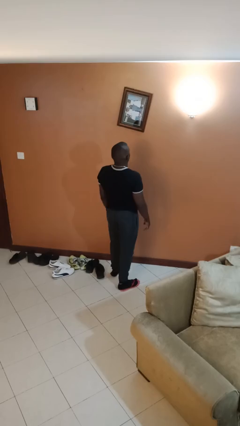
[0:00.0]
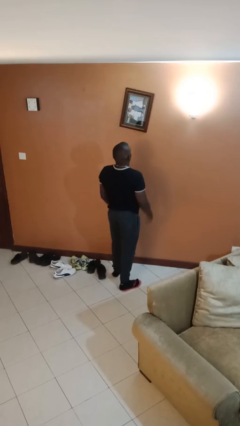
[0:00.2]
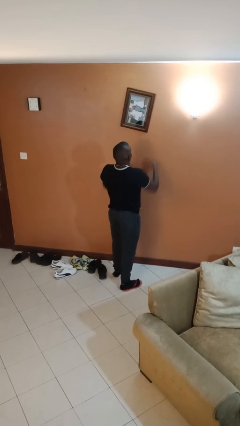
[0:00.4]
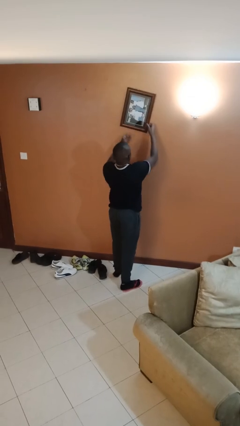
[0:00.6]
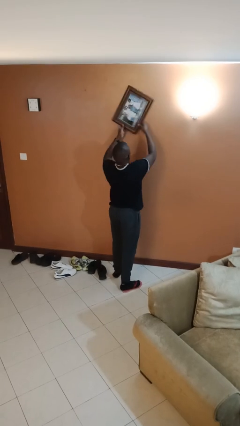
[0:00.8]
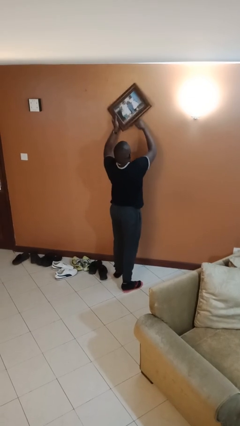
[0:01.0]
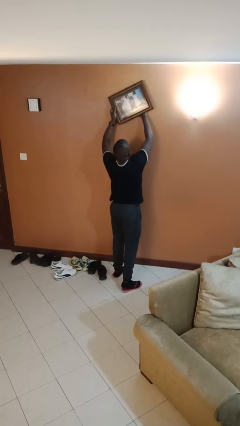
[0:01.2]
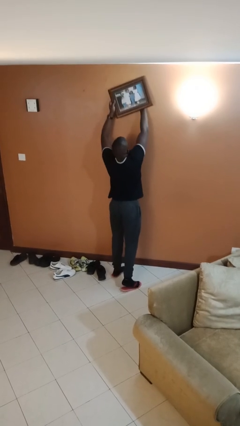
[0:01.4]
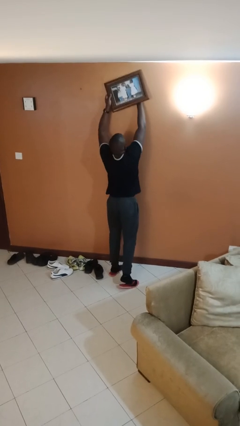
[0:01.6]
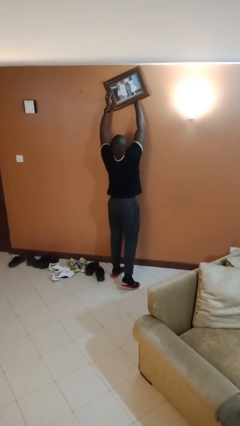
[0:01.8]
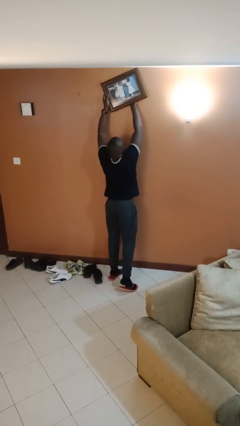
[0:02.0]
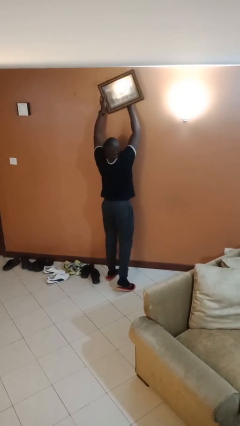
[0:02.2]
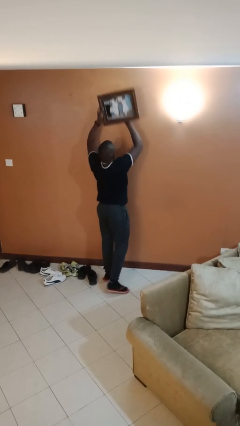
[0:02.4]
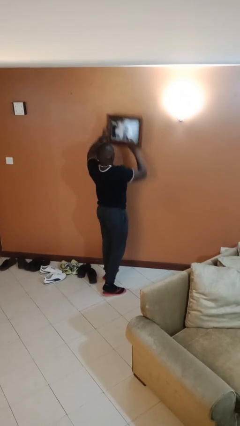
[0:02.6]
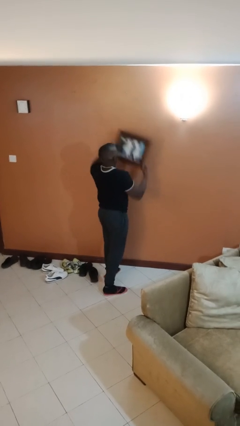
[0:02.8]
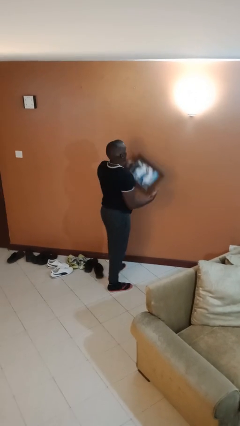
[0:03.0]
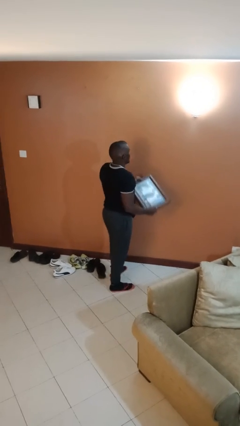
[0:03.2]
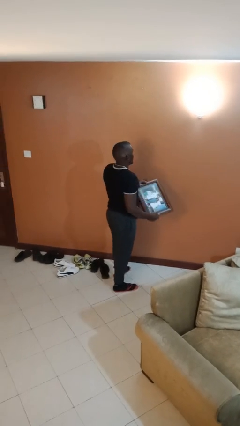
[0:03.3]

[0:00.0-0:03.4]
person takes down picture frame

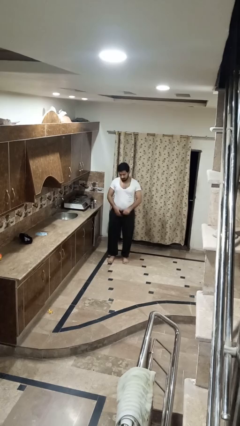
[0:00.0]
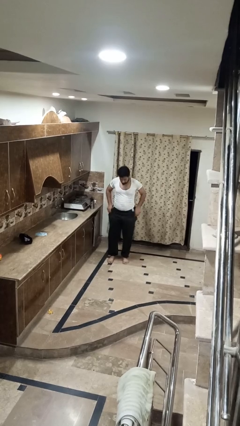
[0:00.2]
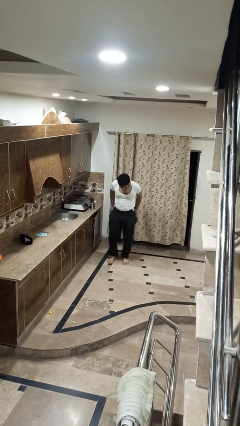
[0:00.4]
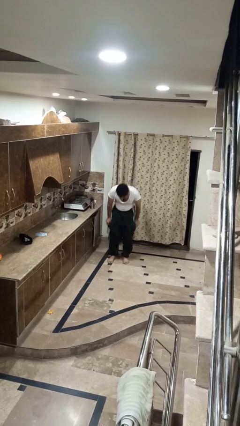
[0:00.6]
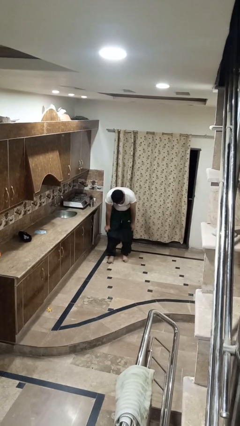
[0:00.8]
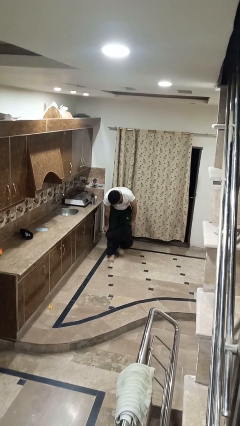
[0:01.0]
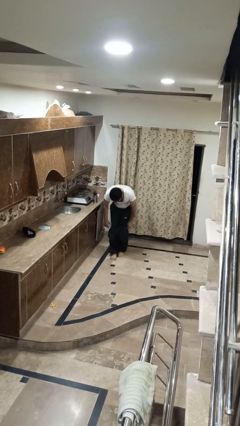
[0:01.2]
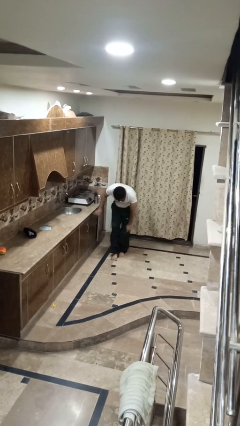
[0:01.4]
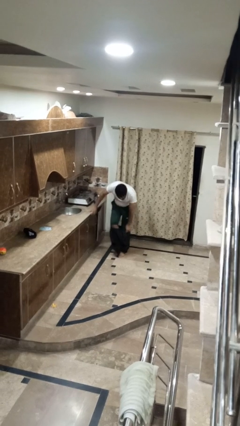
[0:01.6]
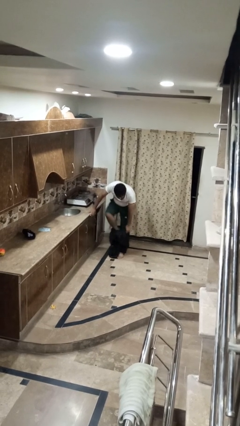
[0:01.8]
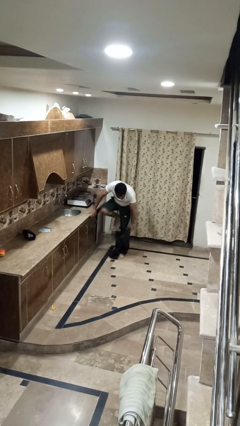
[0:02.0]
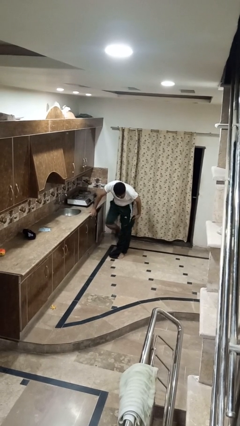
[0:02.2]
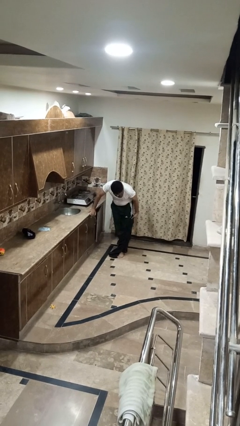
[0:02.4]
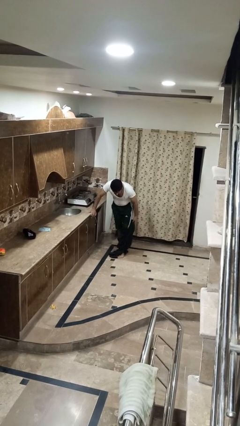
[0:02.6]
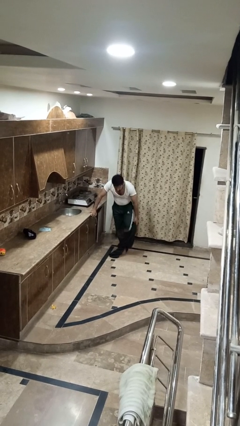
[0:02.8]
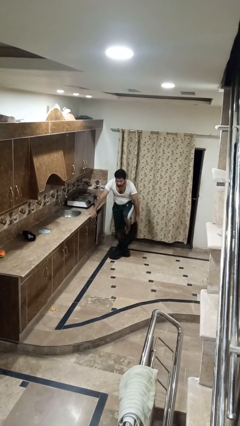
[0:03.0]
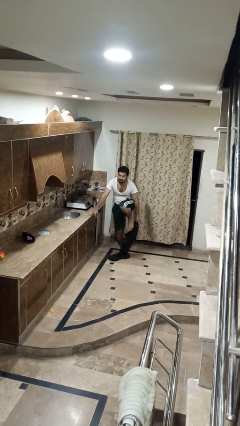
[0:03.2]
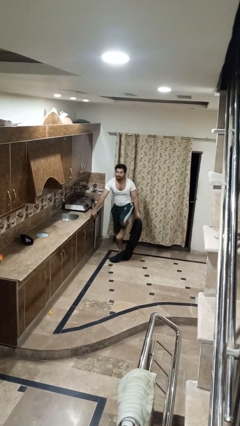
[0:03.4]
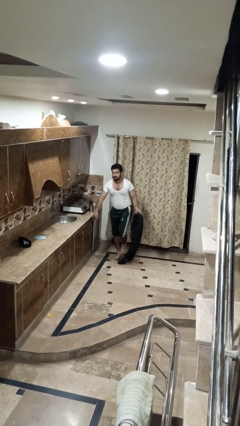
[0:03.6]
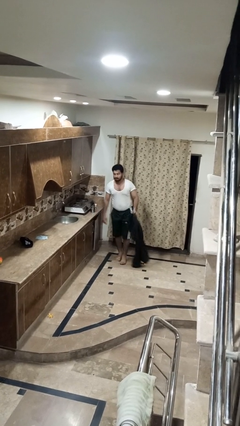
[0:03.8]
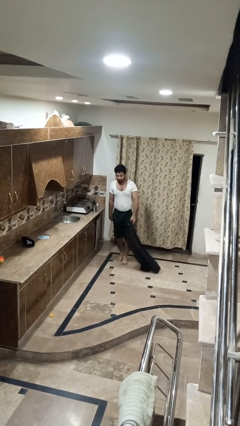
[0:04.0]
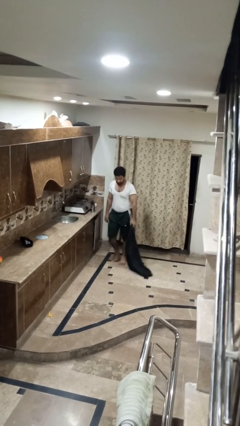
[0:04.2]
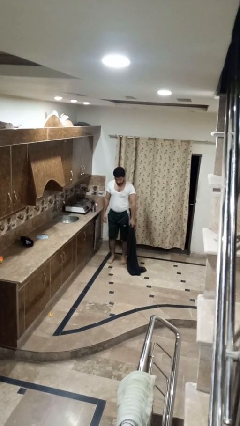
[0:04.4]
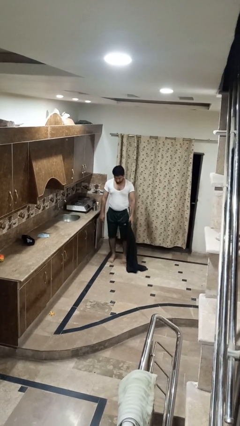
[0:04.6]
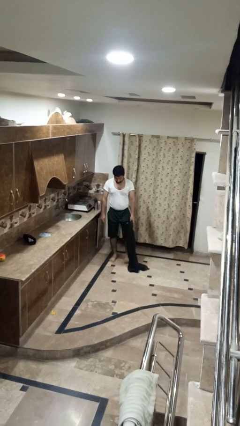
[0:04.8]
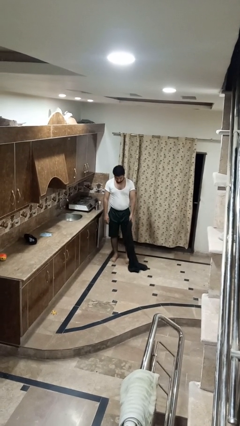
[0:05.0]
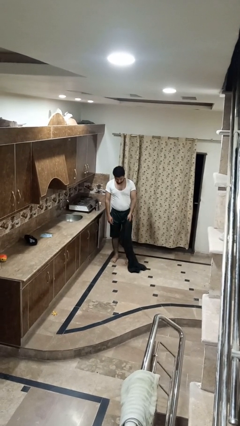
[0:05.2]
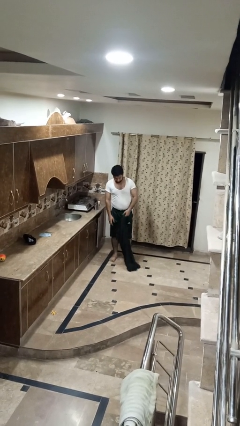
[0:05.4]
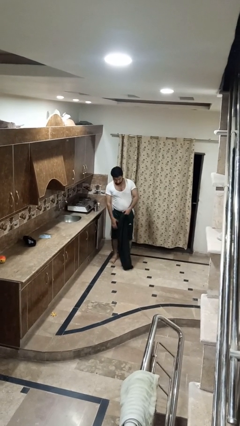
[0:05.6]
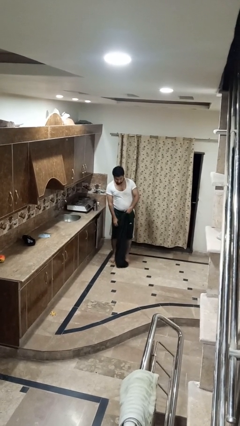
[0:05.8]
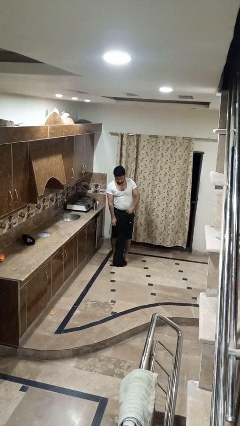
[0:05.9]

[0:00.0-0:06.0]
person takes off pants

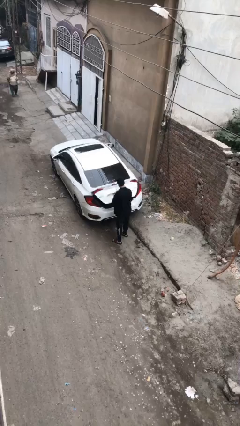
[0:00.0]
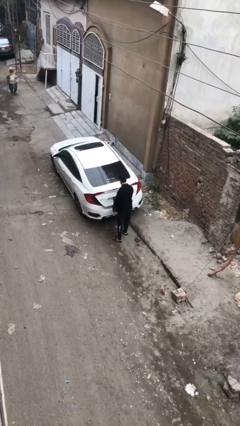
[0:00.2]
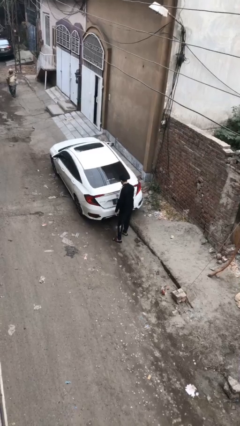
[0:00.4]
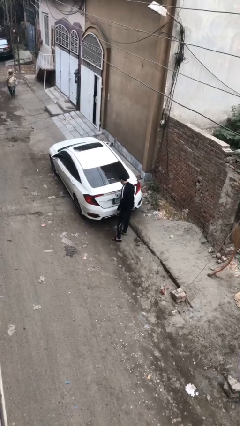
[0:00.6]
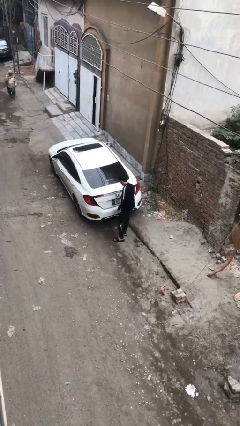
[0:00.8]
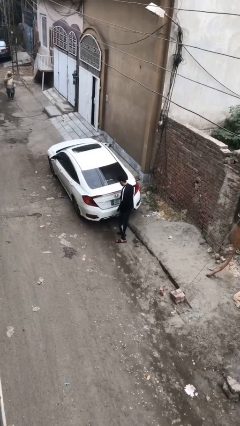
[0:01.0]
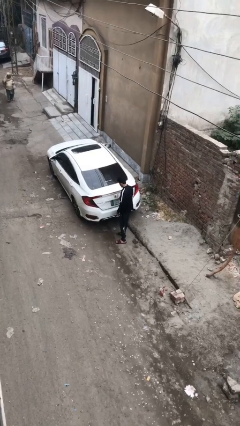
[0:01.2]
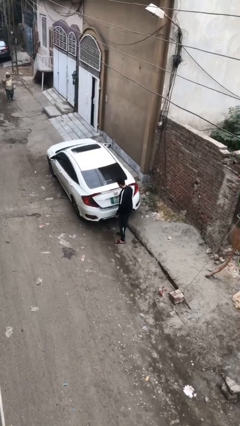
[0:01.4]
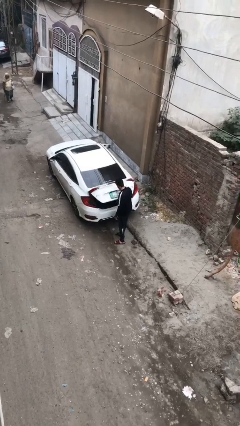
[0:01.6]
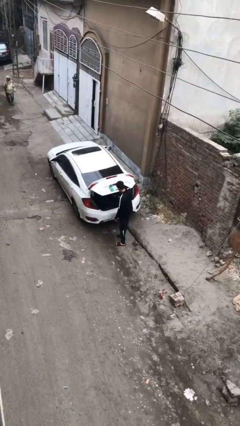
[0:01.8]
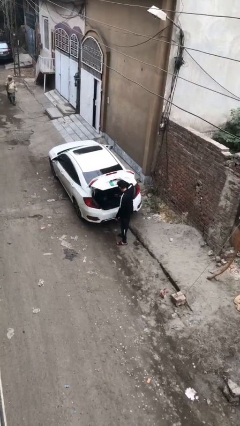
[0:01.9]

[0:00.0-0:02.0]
person closes car trunk

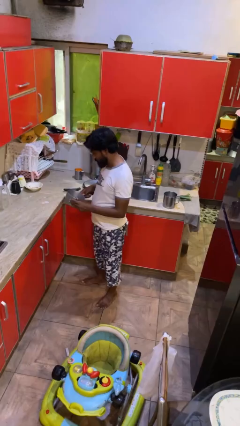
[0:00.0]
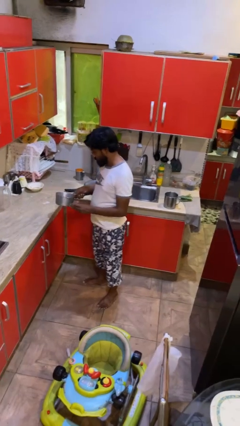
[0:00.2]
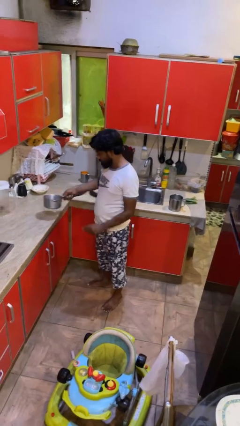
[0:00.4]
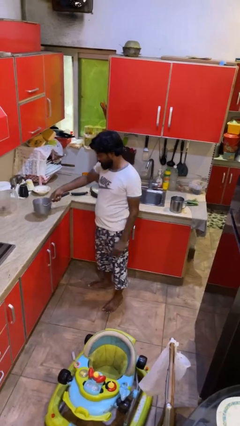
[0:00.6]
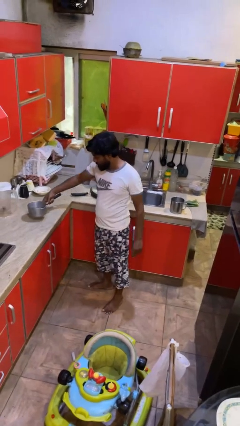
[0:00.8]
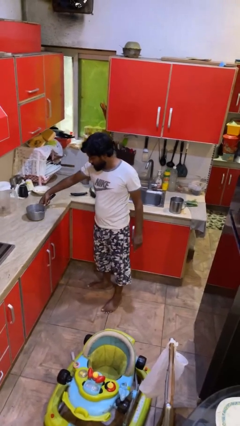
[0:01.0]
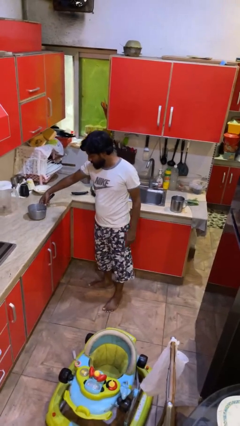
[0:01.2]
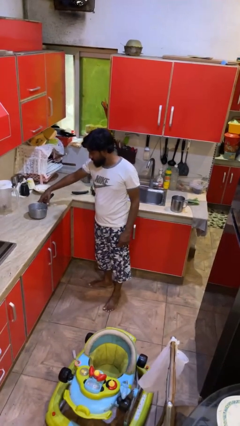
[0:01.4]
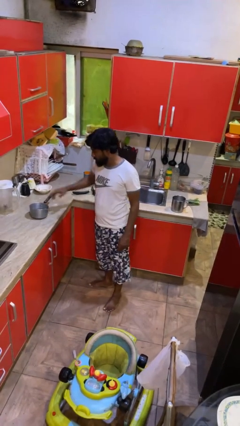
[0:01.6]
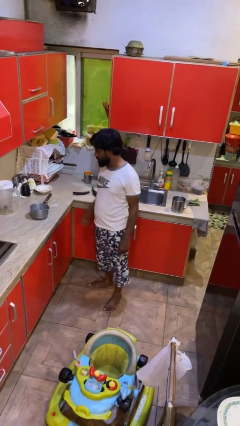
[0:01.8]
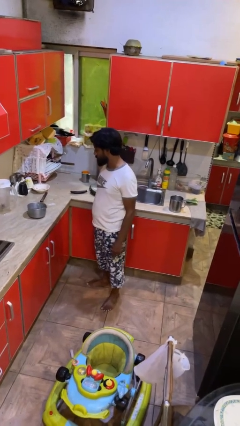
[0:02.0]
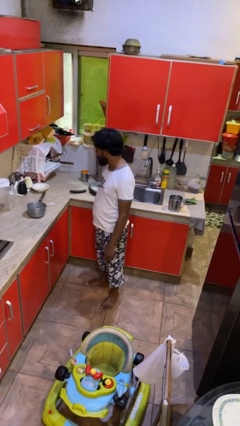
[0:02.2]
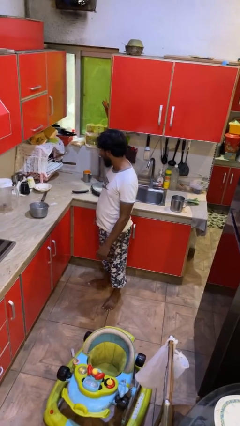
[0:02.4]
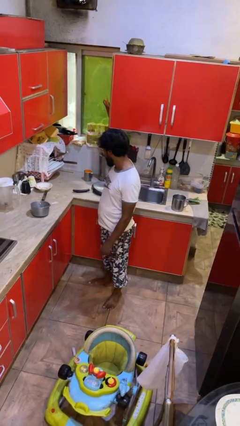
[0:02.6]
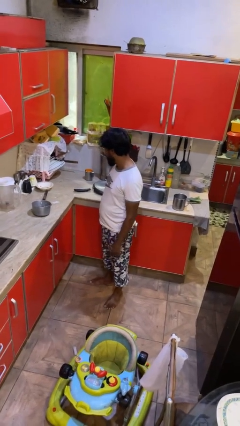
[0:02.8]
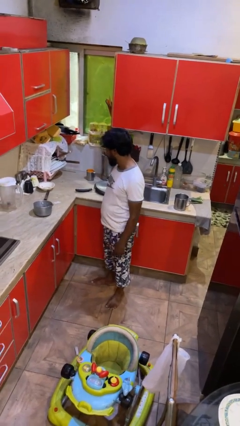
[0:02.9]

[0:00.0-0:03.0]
person puts down object on countertop

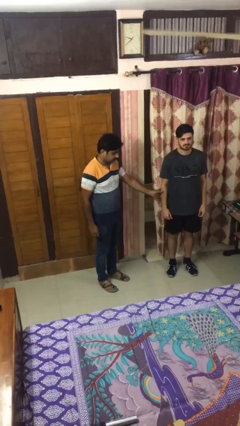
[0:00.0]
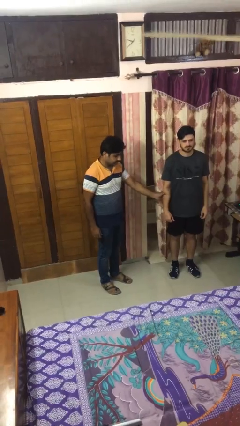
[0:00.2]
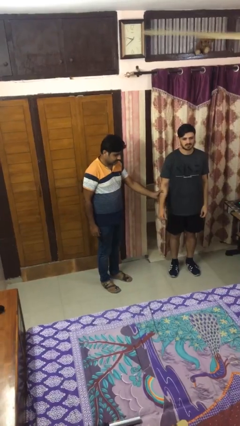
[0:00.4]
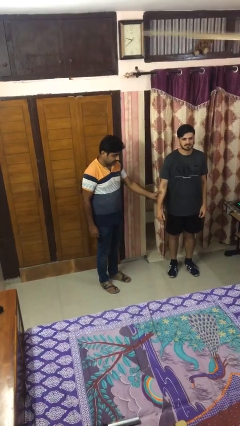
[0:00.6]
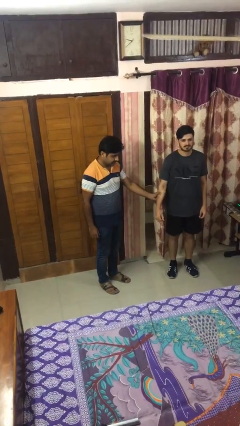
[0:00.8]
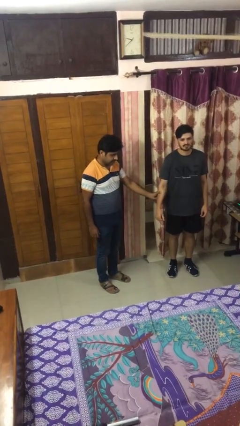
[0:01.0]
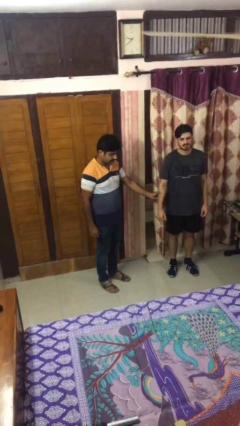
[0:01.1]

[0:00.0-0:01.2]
person grabs person by forearm

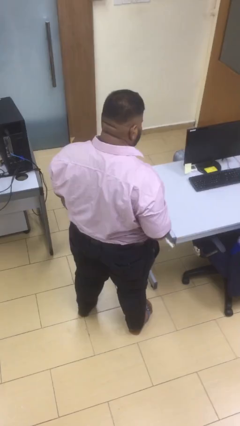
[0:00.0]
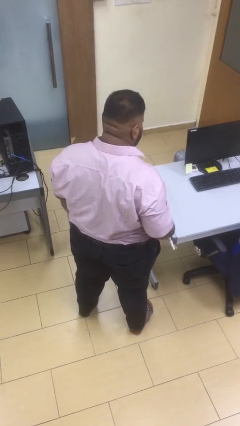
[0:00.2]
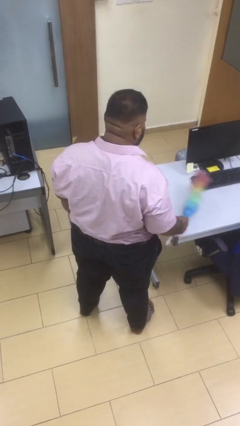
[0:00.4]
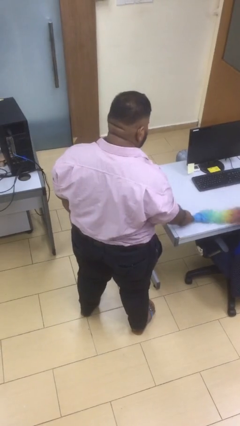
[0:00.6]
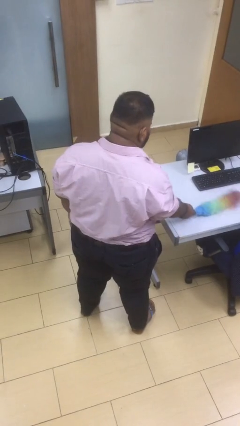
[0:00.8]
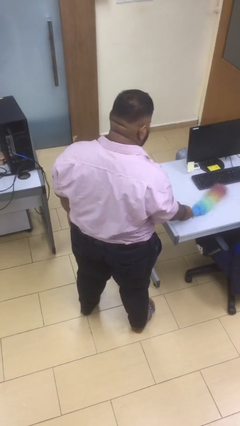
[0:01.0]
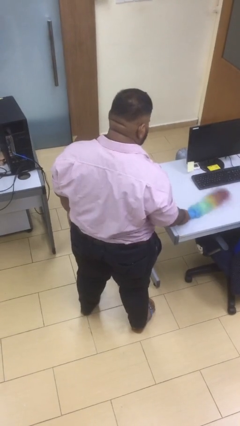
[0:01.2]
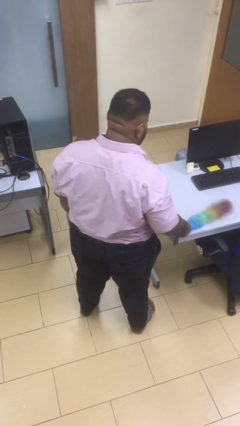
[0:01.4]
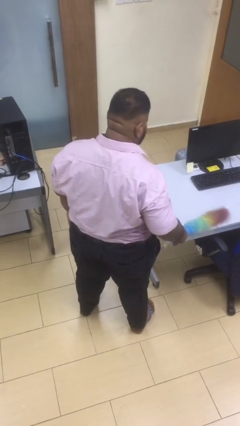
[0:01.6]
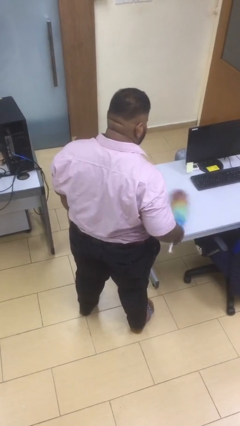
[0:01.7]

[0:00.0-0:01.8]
person dusts furniture
